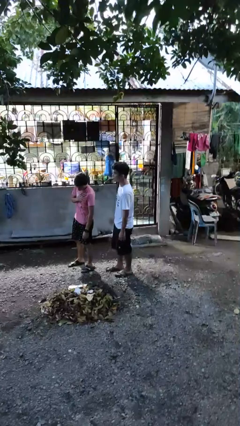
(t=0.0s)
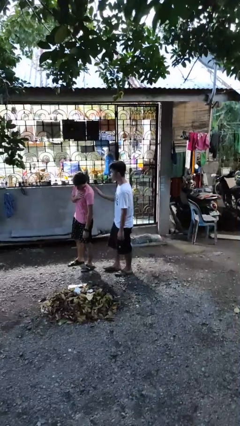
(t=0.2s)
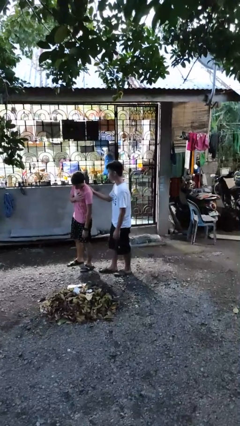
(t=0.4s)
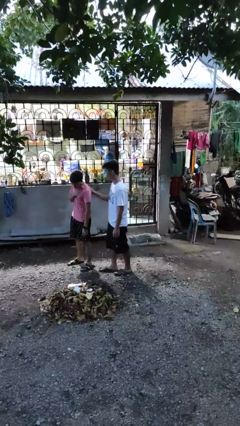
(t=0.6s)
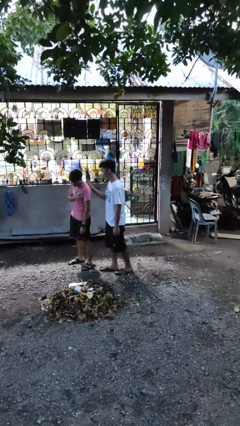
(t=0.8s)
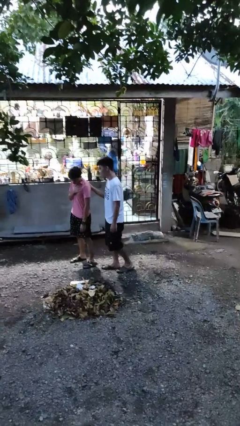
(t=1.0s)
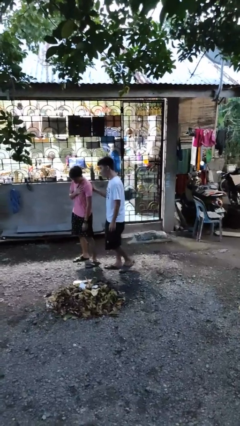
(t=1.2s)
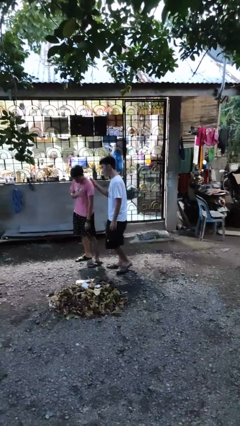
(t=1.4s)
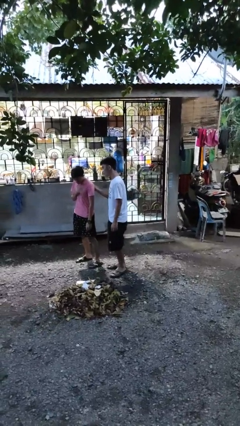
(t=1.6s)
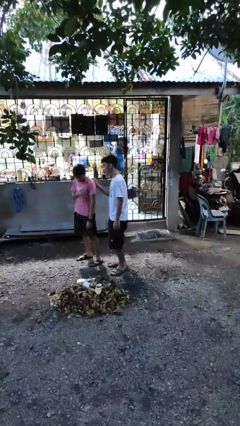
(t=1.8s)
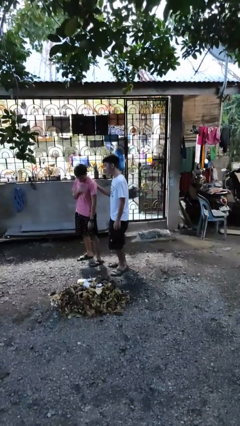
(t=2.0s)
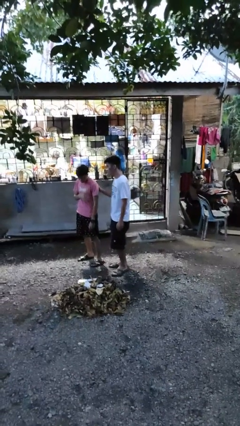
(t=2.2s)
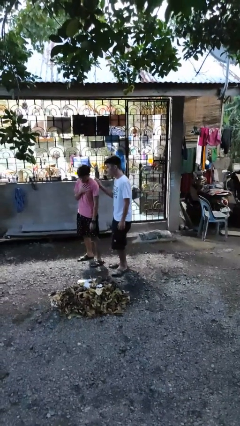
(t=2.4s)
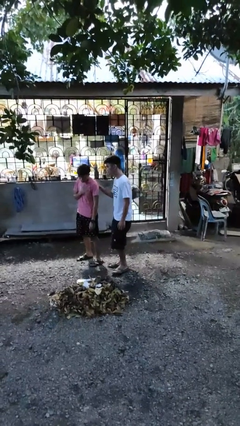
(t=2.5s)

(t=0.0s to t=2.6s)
person touches back of person

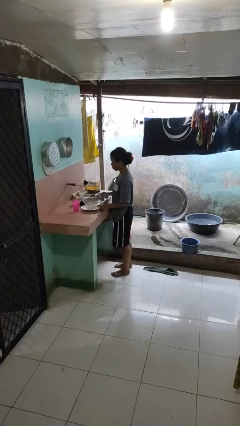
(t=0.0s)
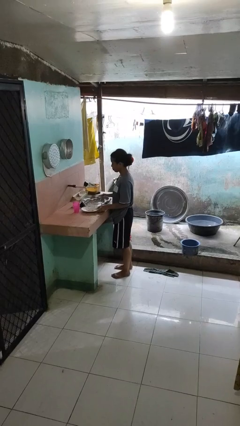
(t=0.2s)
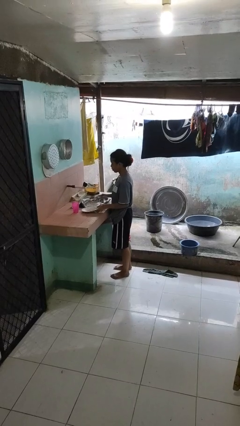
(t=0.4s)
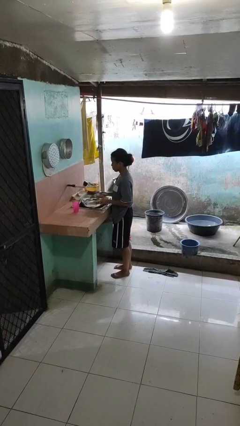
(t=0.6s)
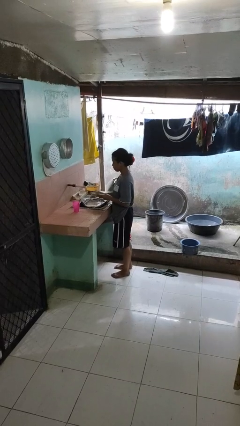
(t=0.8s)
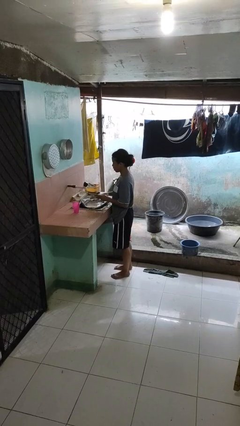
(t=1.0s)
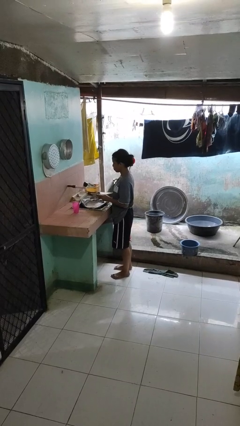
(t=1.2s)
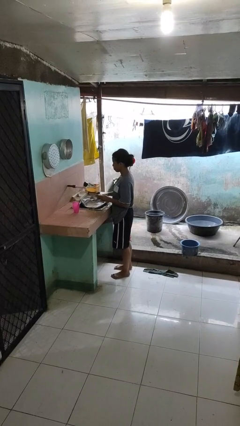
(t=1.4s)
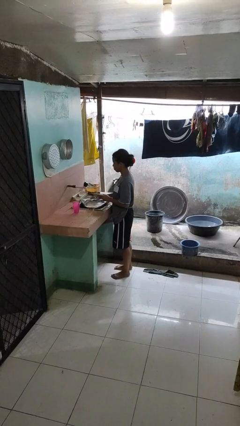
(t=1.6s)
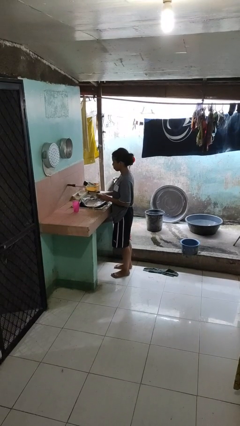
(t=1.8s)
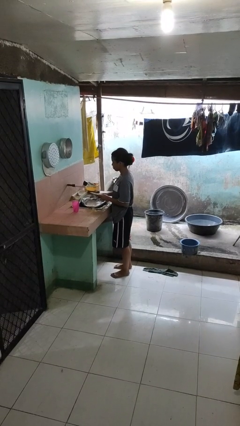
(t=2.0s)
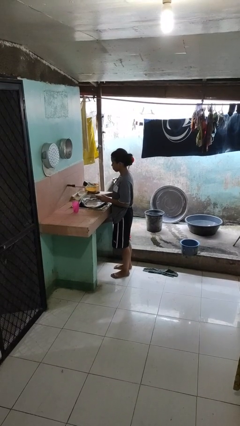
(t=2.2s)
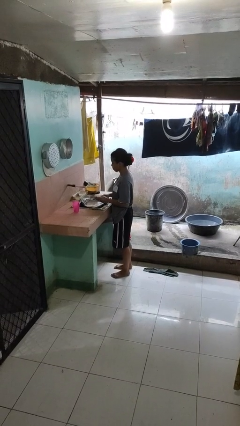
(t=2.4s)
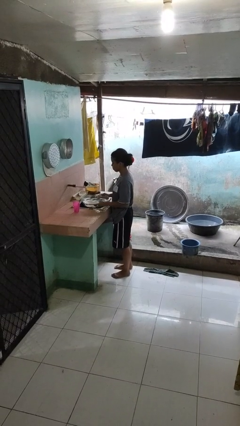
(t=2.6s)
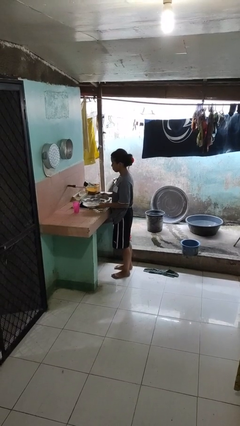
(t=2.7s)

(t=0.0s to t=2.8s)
person washes dish

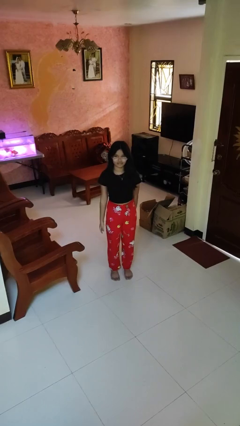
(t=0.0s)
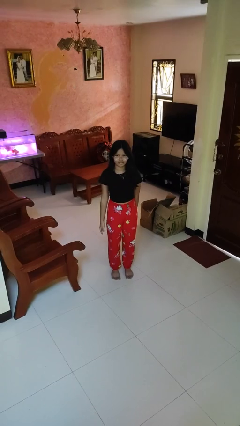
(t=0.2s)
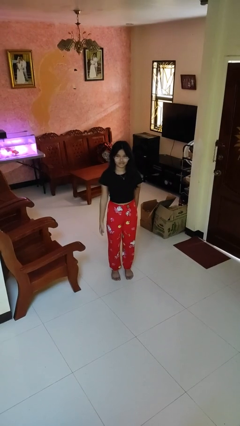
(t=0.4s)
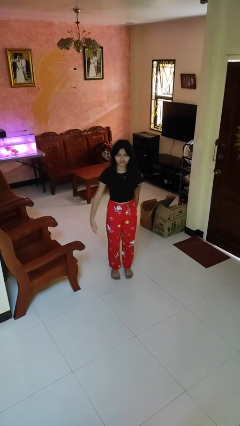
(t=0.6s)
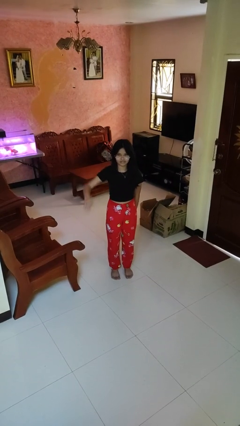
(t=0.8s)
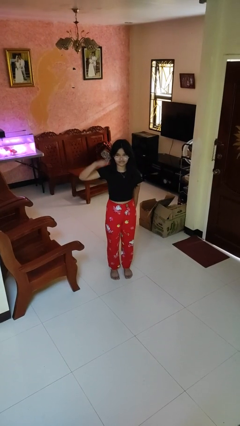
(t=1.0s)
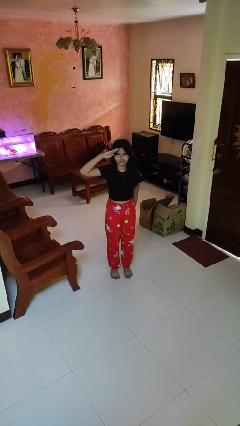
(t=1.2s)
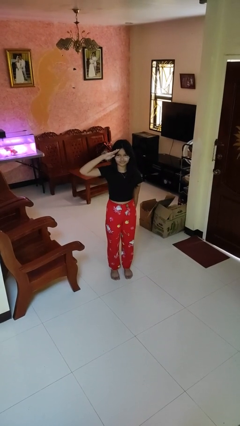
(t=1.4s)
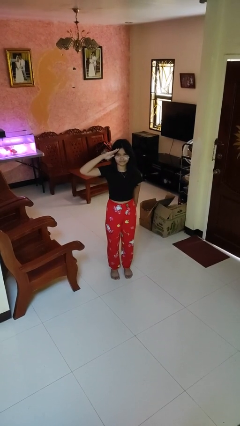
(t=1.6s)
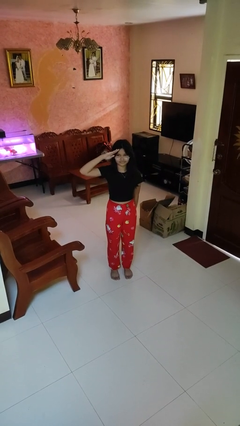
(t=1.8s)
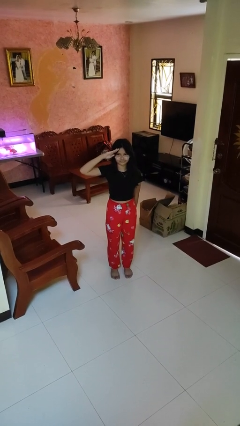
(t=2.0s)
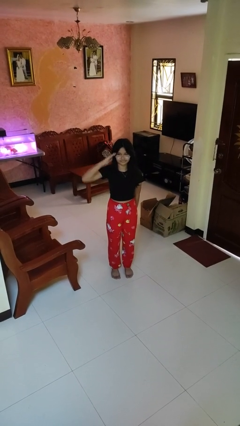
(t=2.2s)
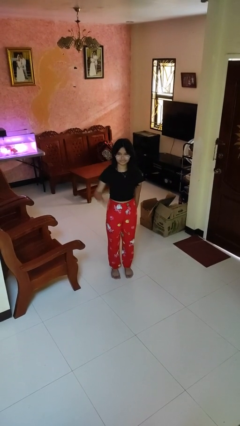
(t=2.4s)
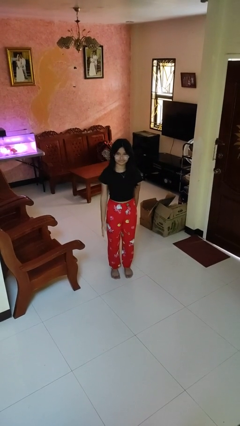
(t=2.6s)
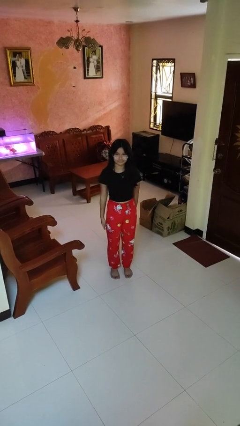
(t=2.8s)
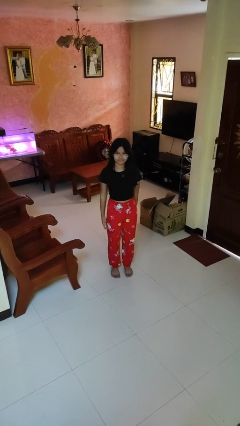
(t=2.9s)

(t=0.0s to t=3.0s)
person salutes

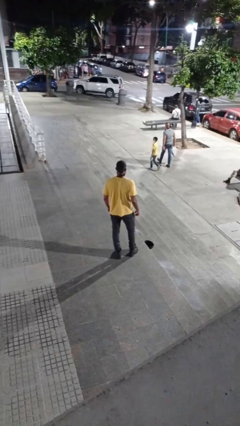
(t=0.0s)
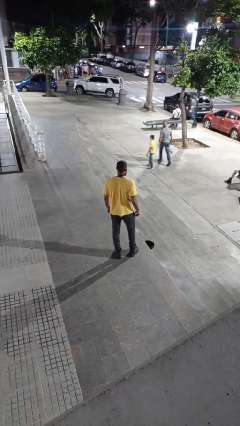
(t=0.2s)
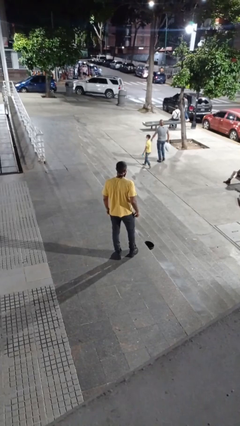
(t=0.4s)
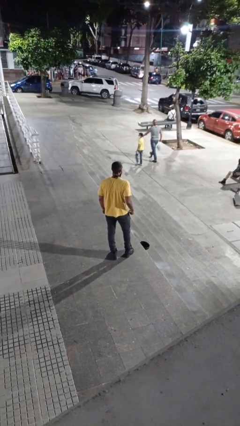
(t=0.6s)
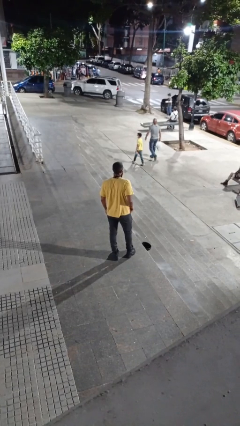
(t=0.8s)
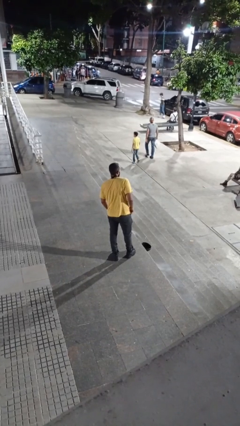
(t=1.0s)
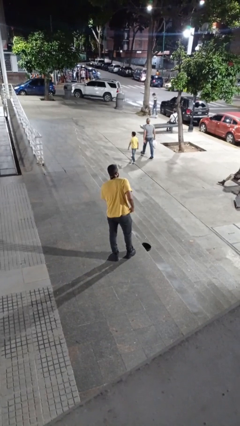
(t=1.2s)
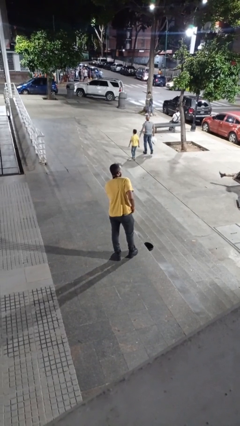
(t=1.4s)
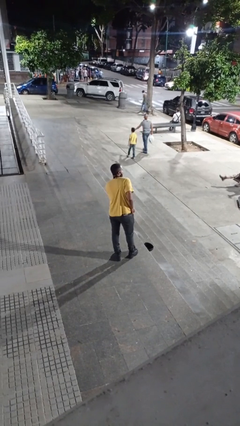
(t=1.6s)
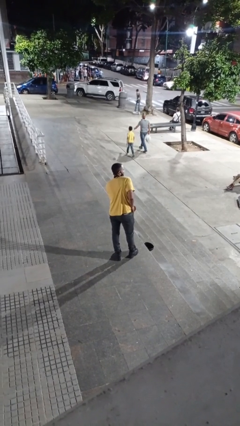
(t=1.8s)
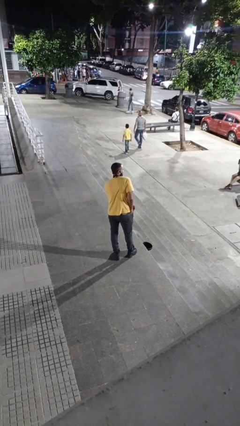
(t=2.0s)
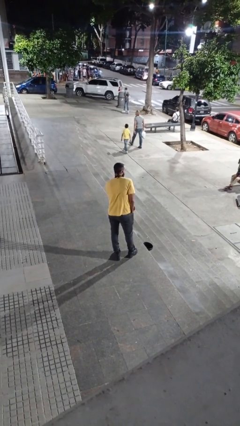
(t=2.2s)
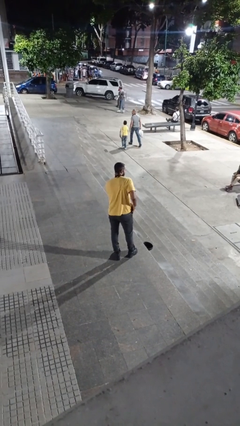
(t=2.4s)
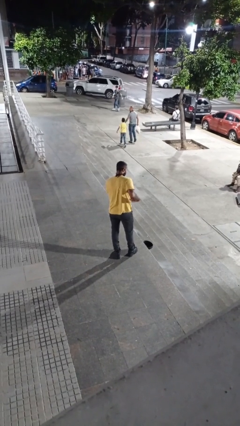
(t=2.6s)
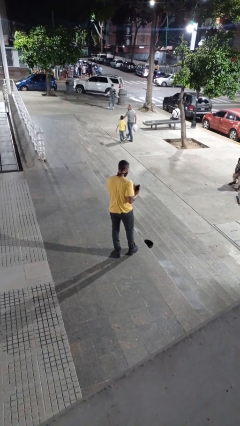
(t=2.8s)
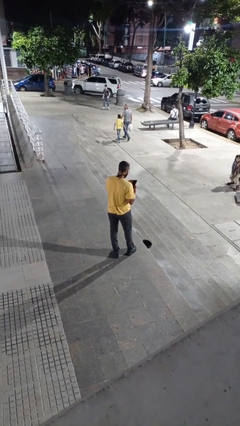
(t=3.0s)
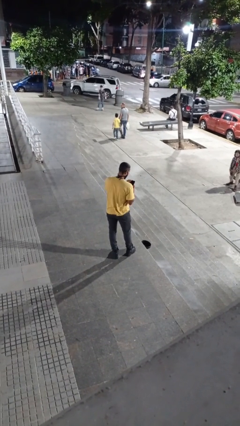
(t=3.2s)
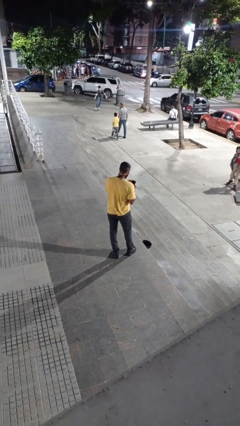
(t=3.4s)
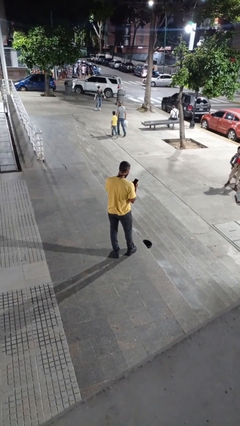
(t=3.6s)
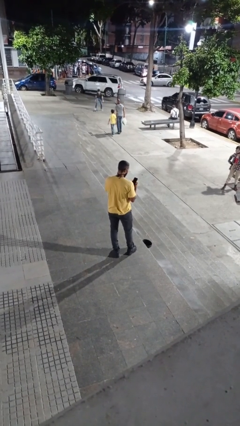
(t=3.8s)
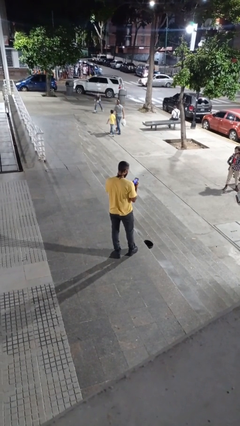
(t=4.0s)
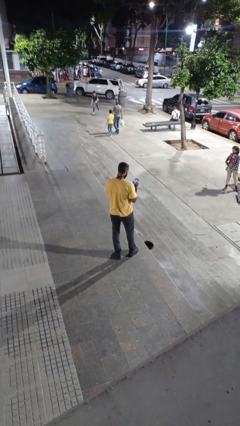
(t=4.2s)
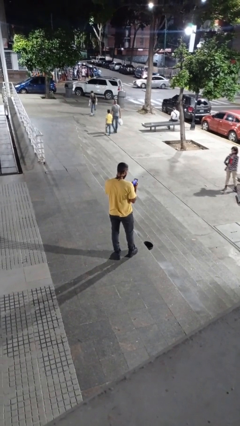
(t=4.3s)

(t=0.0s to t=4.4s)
person takes phone from pocket

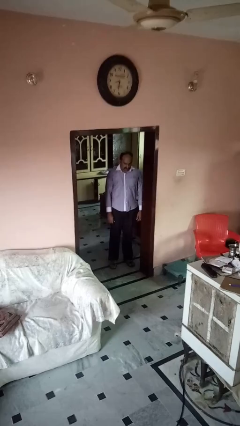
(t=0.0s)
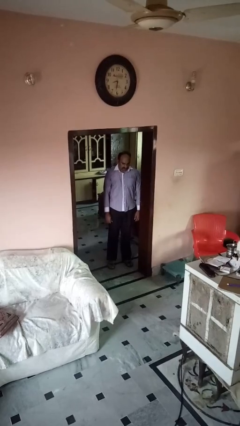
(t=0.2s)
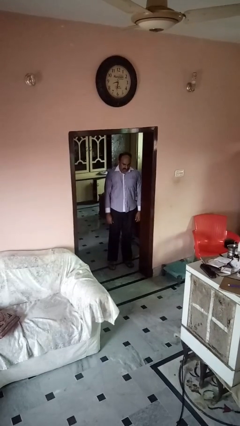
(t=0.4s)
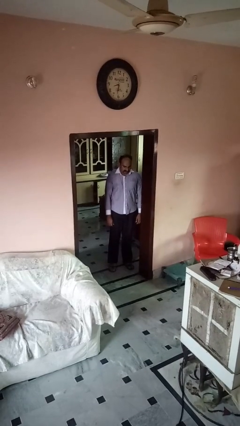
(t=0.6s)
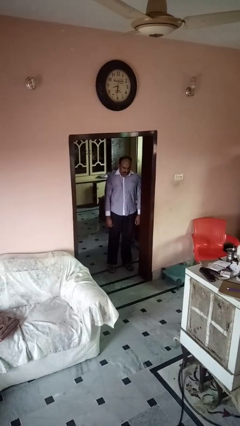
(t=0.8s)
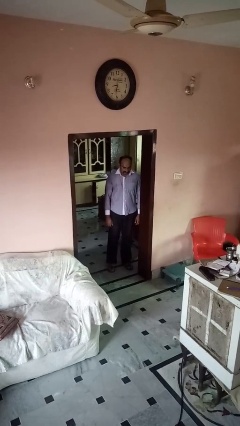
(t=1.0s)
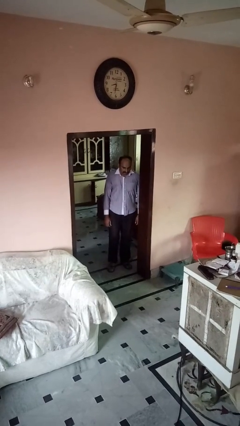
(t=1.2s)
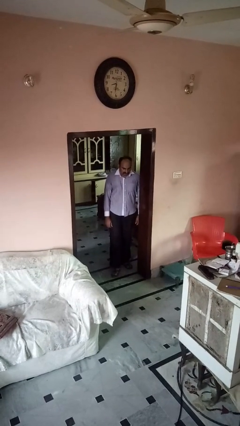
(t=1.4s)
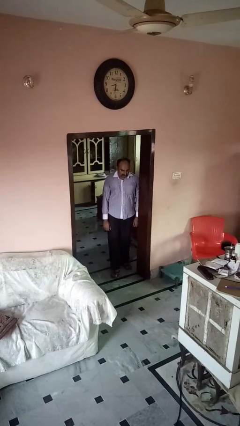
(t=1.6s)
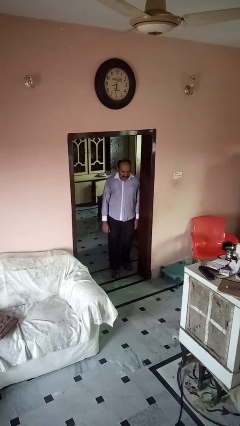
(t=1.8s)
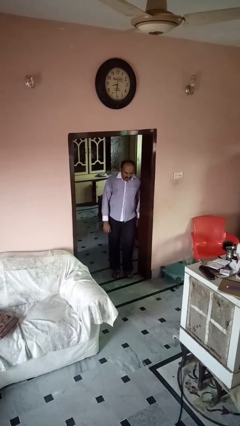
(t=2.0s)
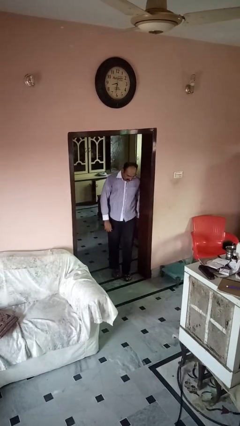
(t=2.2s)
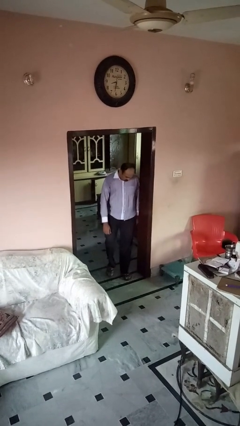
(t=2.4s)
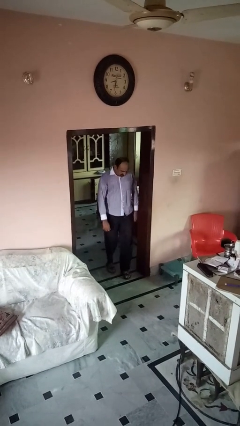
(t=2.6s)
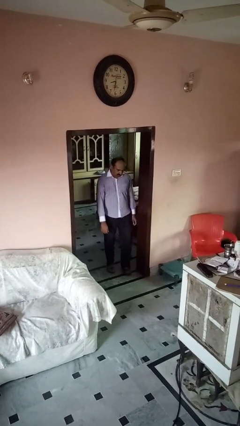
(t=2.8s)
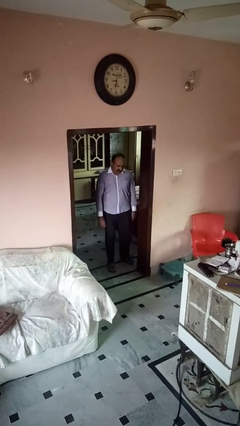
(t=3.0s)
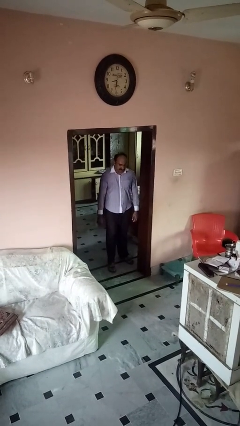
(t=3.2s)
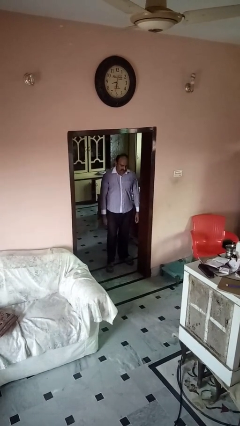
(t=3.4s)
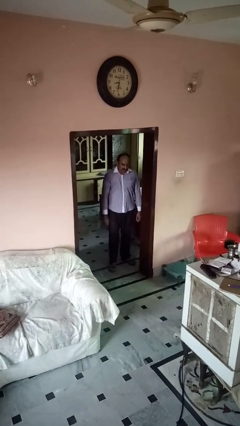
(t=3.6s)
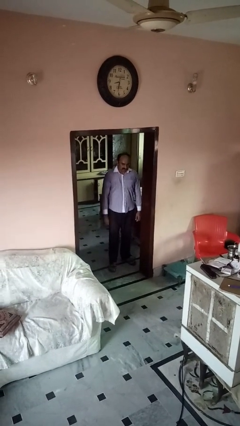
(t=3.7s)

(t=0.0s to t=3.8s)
person bumps into wall

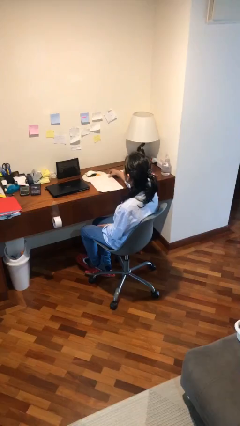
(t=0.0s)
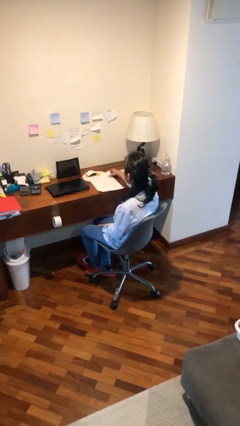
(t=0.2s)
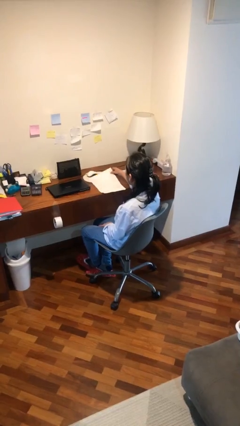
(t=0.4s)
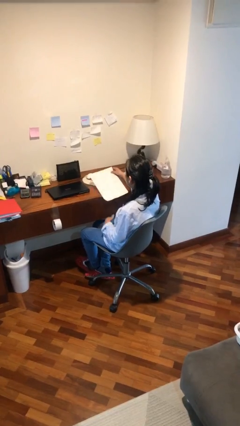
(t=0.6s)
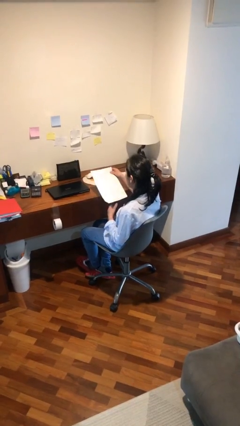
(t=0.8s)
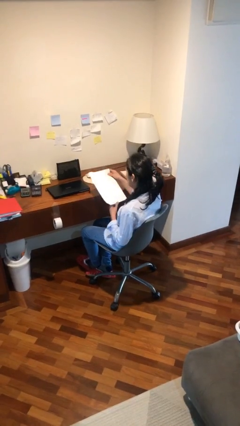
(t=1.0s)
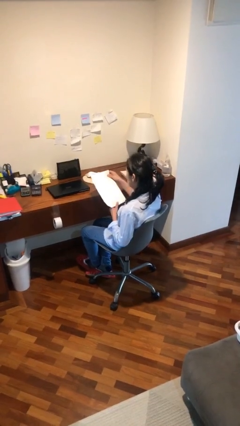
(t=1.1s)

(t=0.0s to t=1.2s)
person picks up object from table
